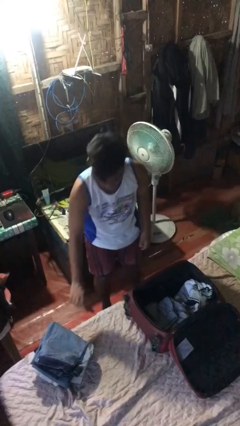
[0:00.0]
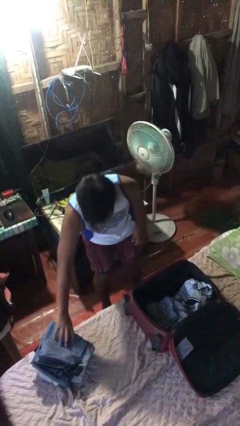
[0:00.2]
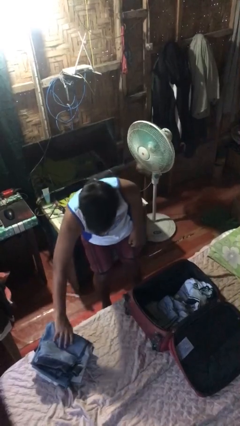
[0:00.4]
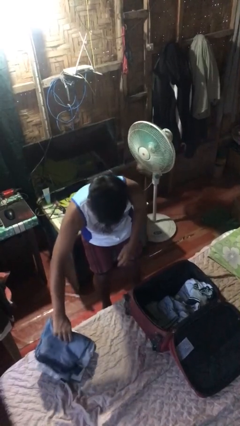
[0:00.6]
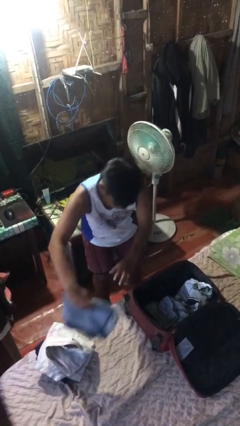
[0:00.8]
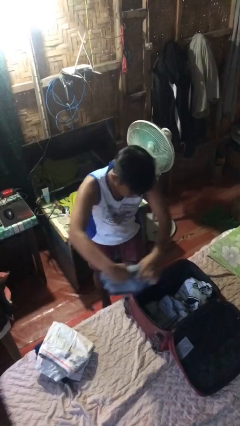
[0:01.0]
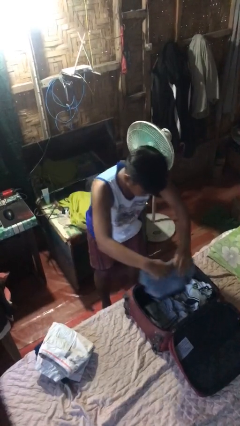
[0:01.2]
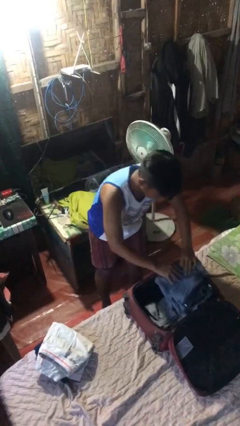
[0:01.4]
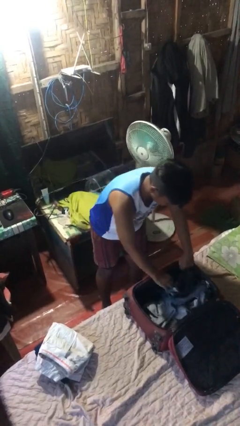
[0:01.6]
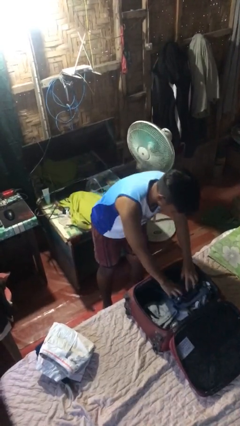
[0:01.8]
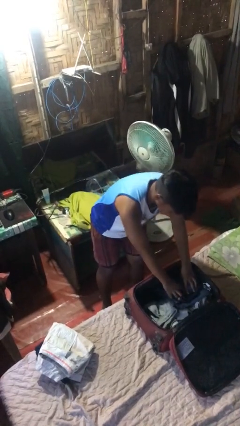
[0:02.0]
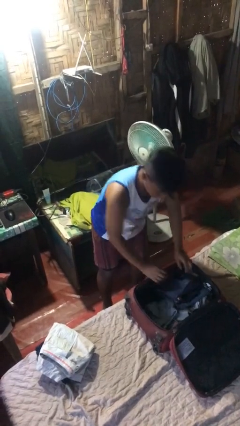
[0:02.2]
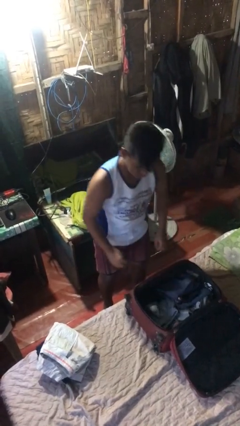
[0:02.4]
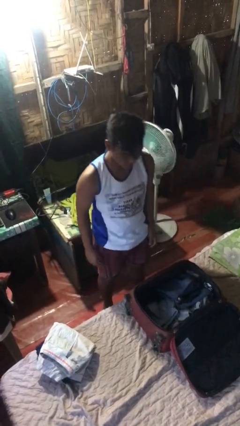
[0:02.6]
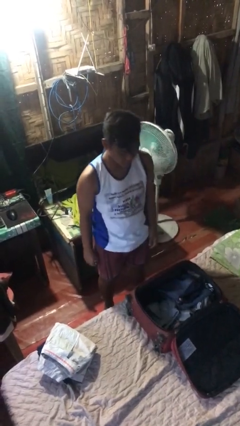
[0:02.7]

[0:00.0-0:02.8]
person loads clothes into suitcase

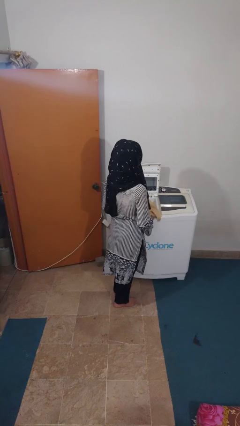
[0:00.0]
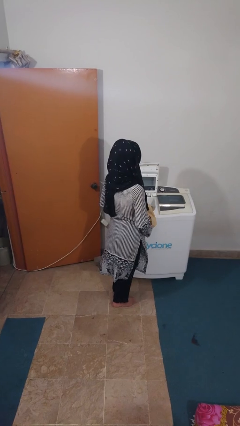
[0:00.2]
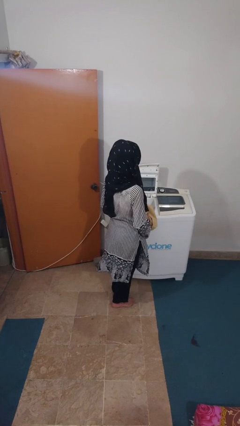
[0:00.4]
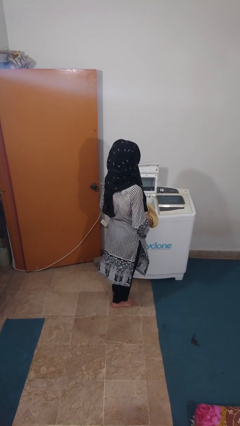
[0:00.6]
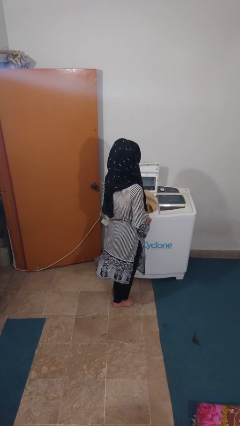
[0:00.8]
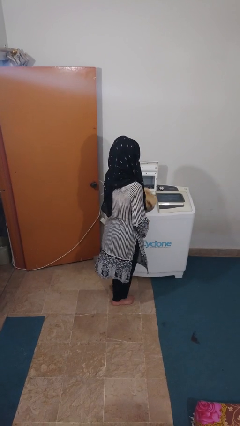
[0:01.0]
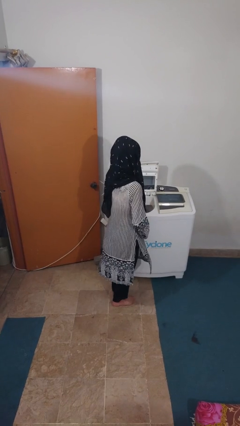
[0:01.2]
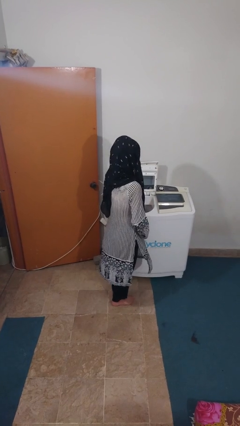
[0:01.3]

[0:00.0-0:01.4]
person loads clotheswasher

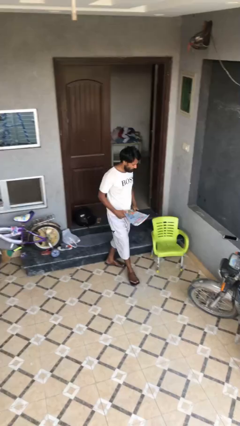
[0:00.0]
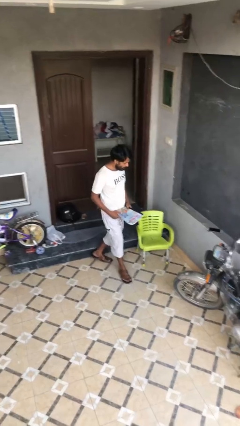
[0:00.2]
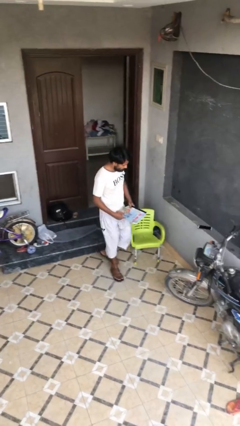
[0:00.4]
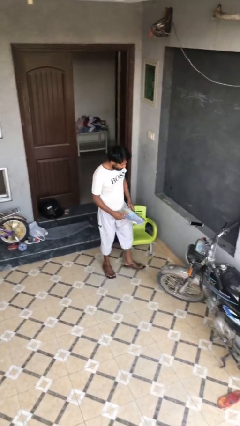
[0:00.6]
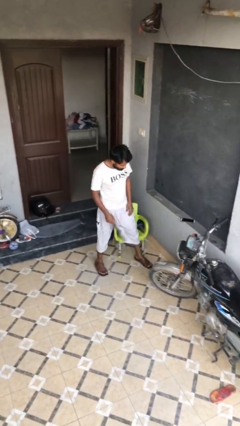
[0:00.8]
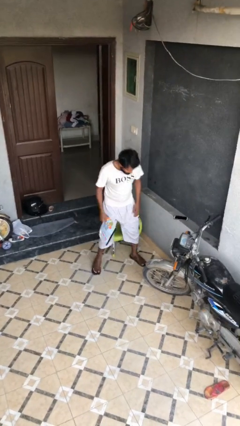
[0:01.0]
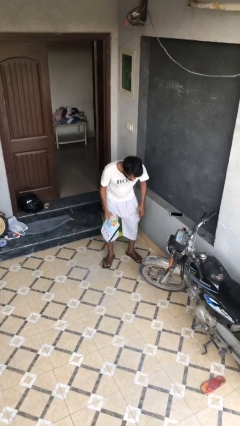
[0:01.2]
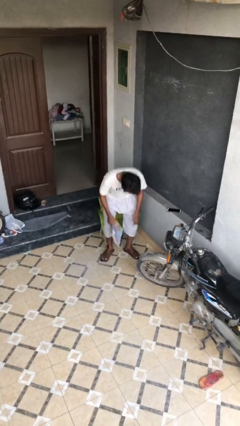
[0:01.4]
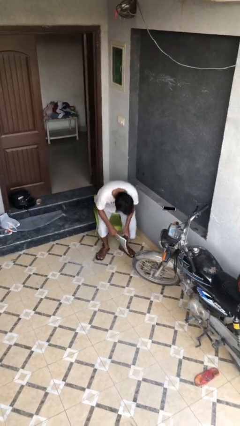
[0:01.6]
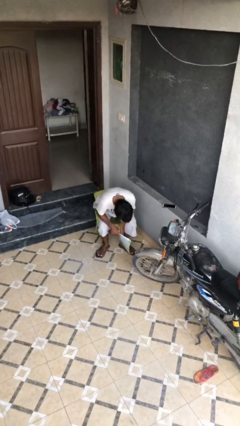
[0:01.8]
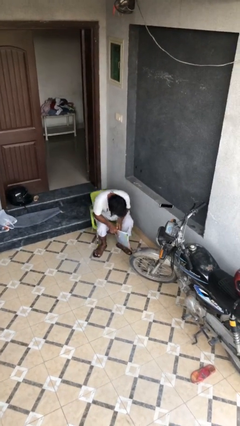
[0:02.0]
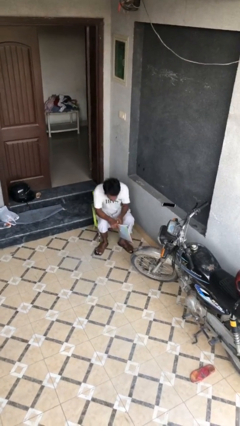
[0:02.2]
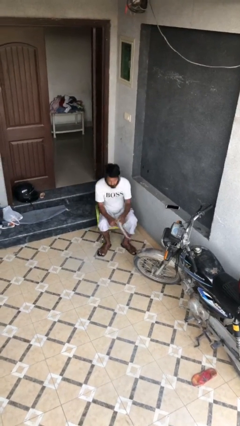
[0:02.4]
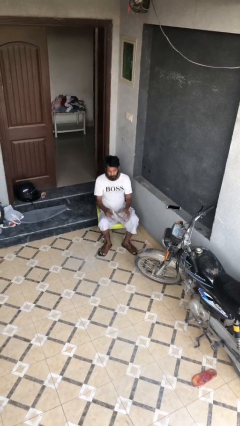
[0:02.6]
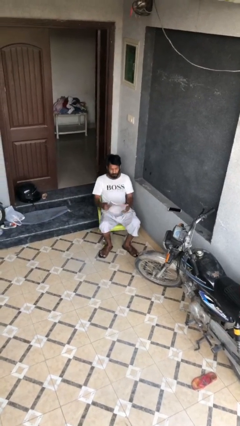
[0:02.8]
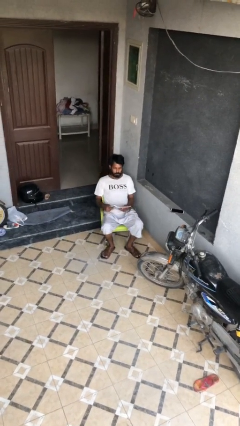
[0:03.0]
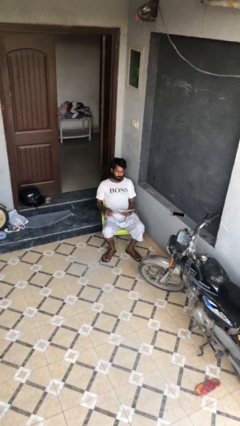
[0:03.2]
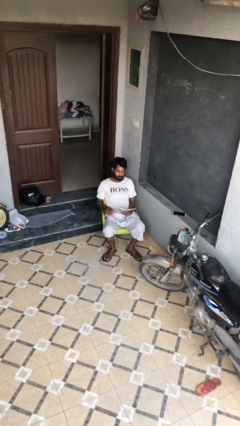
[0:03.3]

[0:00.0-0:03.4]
person sits down

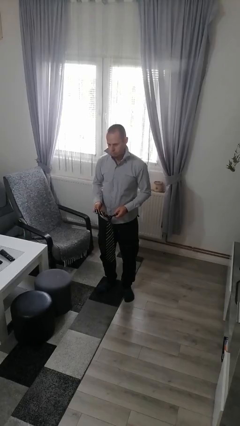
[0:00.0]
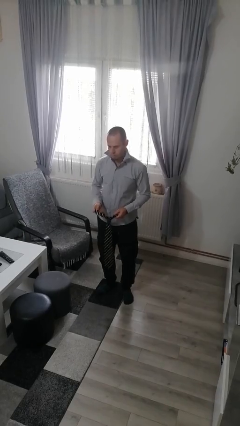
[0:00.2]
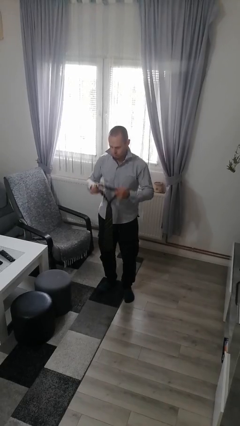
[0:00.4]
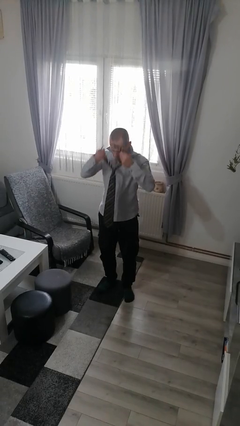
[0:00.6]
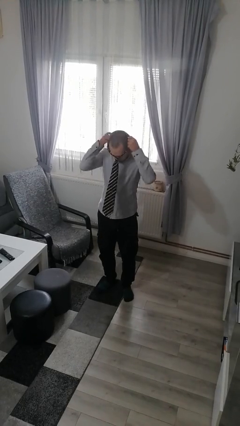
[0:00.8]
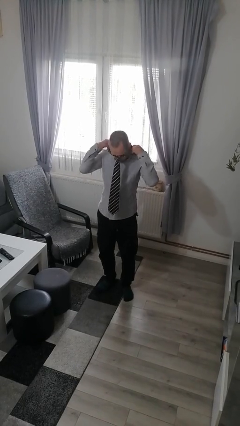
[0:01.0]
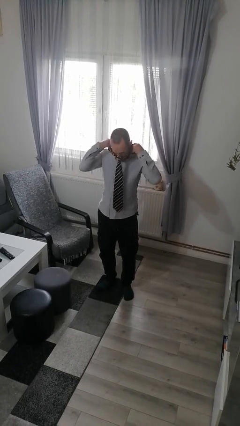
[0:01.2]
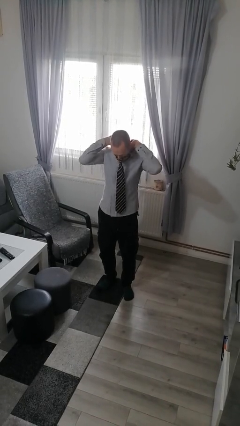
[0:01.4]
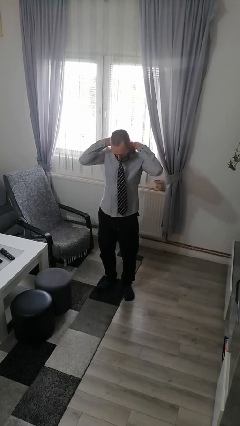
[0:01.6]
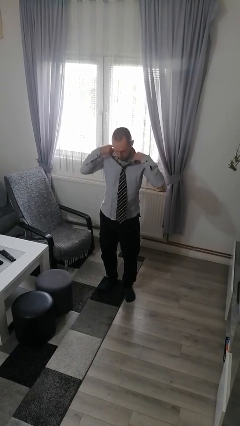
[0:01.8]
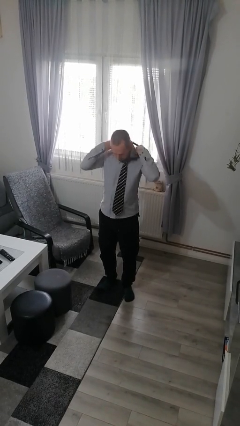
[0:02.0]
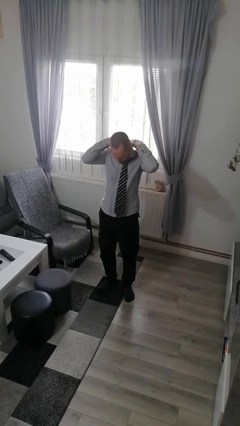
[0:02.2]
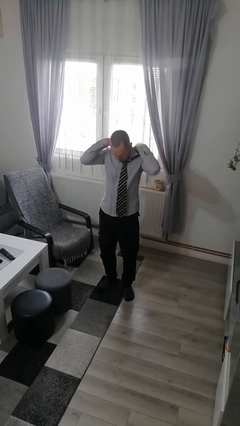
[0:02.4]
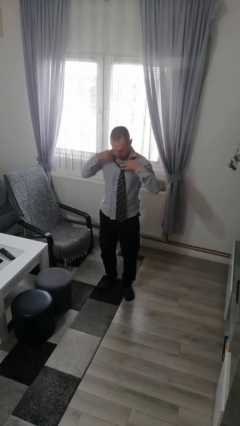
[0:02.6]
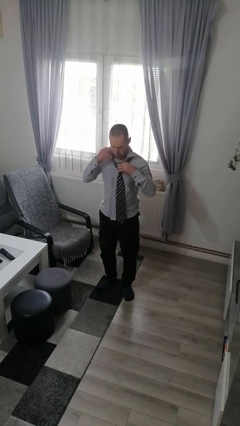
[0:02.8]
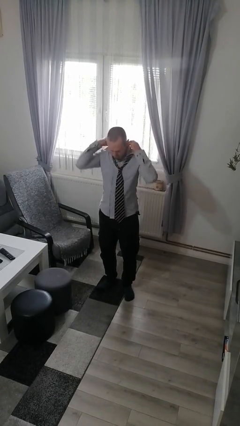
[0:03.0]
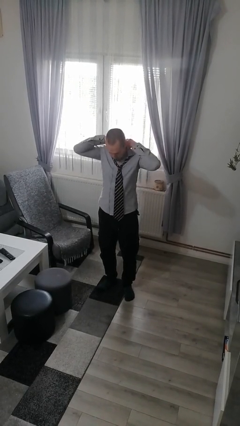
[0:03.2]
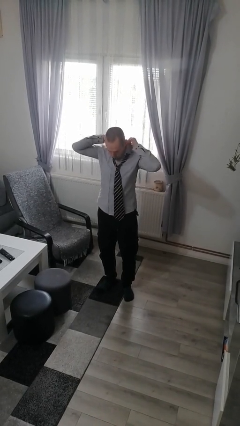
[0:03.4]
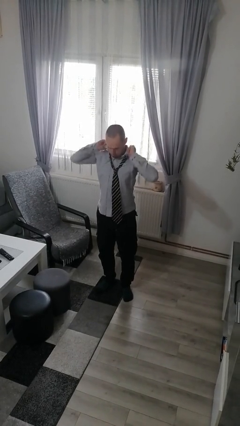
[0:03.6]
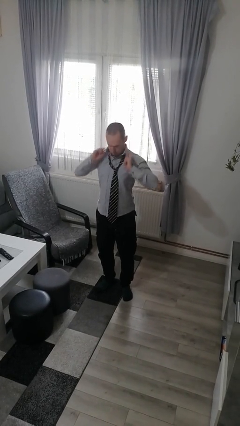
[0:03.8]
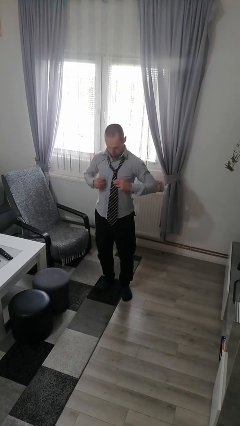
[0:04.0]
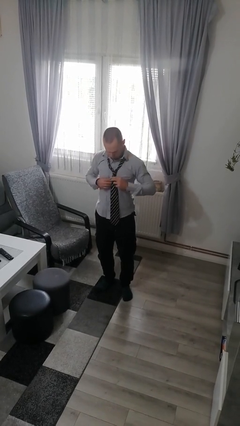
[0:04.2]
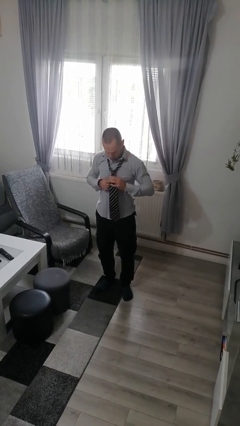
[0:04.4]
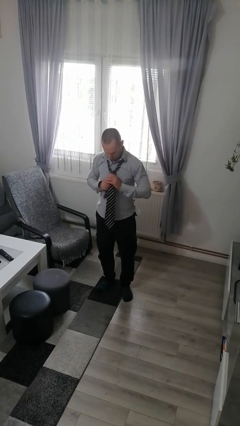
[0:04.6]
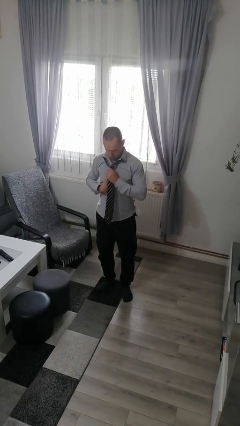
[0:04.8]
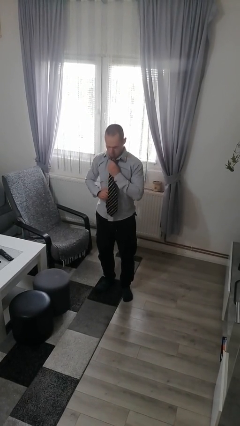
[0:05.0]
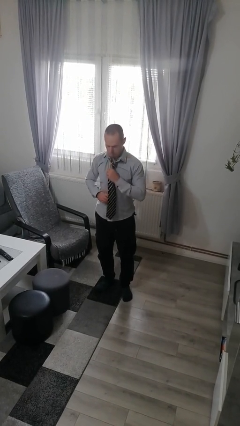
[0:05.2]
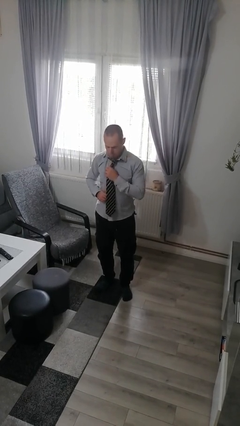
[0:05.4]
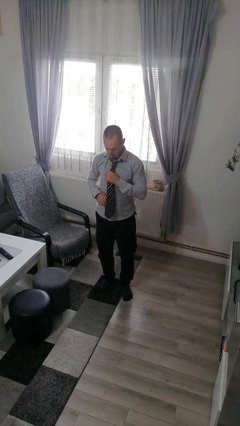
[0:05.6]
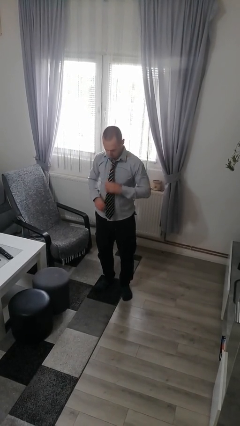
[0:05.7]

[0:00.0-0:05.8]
person puts on necktie

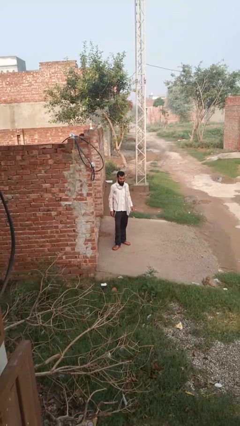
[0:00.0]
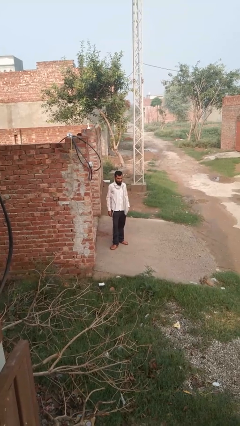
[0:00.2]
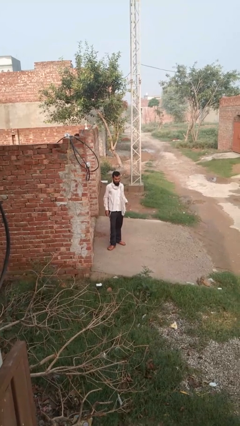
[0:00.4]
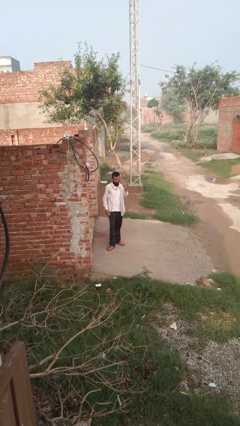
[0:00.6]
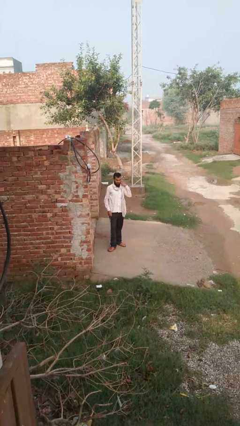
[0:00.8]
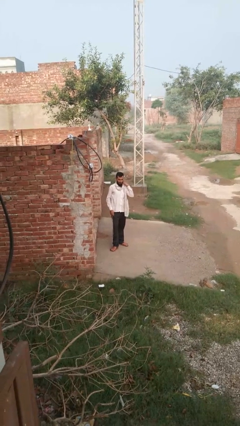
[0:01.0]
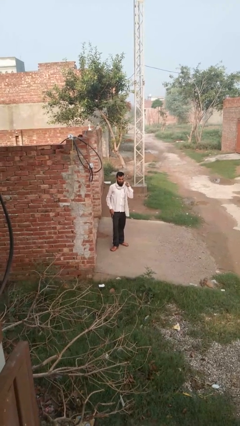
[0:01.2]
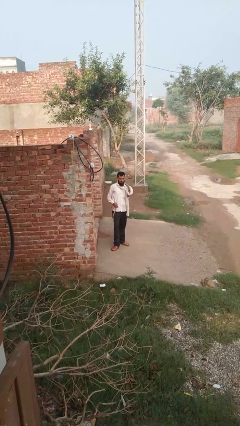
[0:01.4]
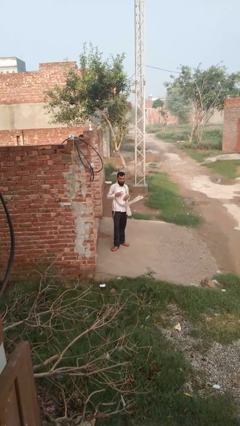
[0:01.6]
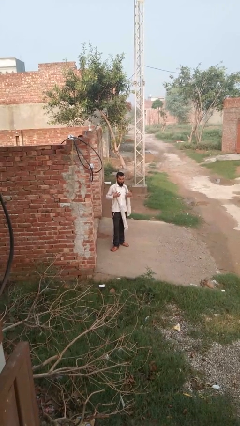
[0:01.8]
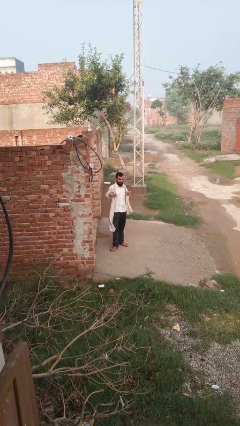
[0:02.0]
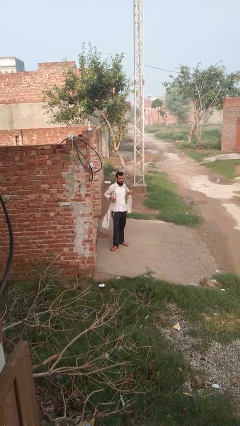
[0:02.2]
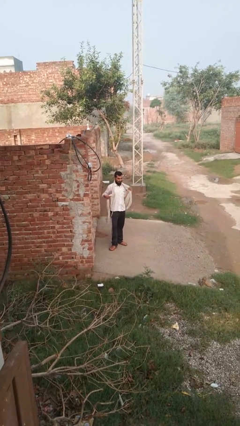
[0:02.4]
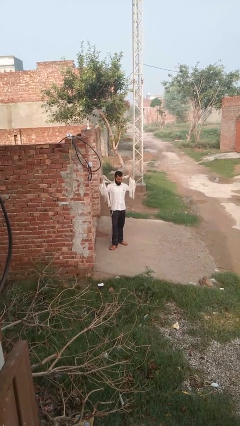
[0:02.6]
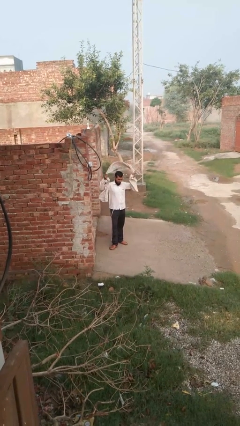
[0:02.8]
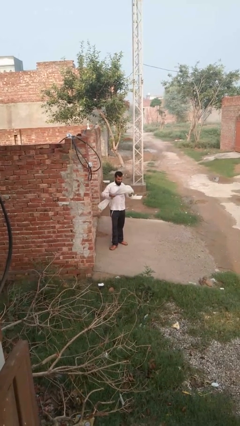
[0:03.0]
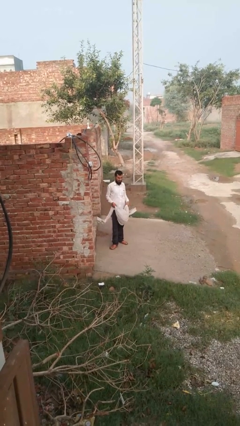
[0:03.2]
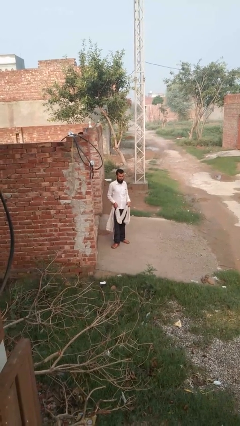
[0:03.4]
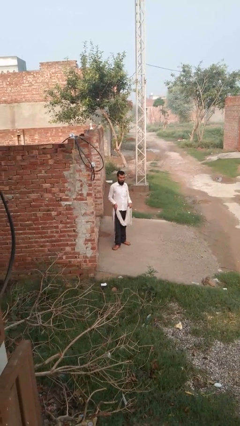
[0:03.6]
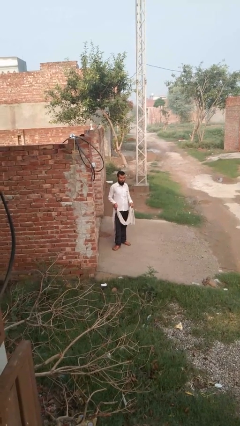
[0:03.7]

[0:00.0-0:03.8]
person takes off scarf

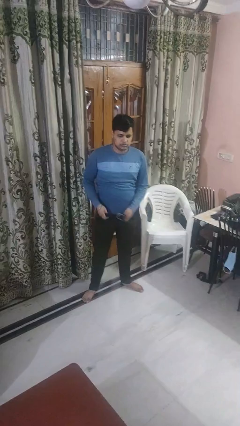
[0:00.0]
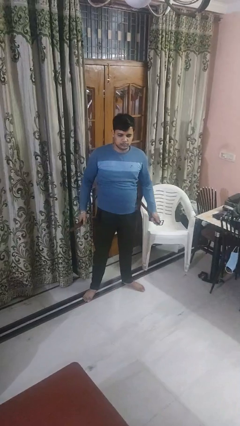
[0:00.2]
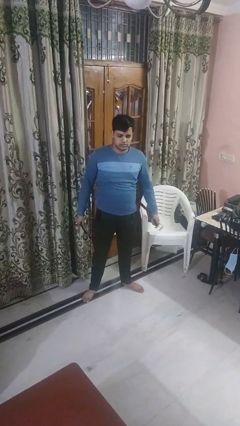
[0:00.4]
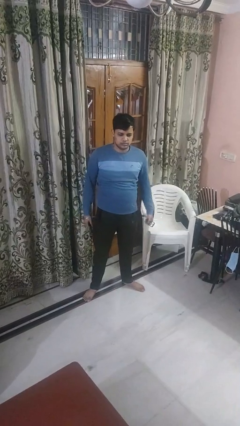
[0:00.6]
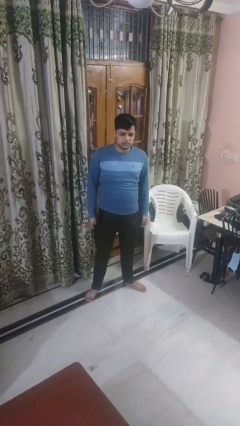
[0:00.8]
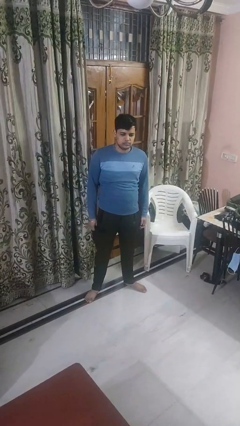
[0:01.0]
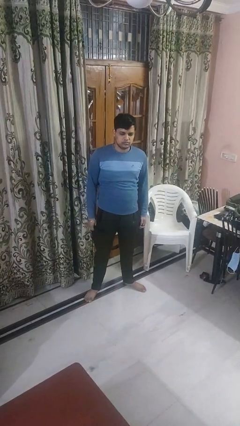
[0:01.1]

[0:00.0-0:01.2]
person takes off belt
